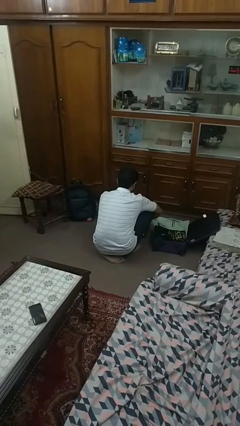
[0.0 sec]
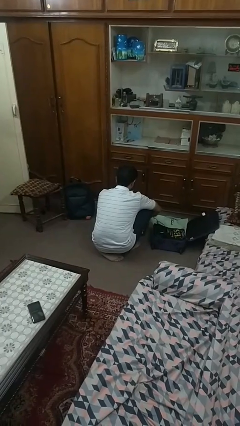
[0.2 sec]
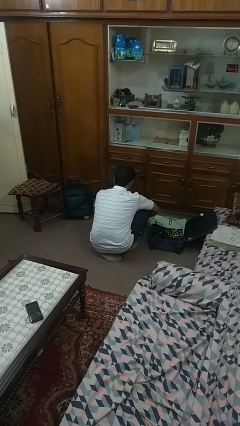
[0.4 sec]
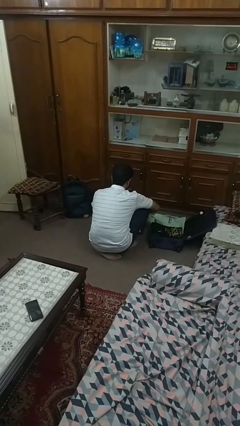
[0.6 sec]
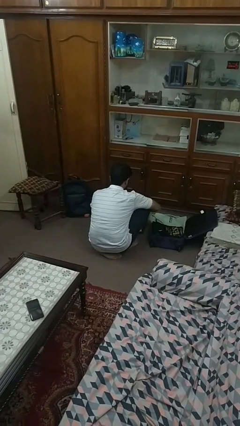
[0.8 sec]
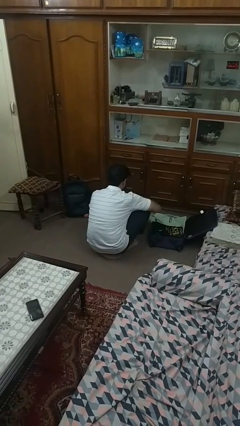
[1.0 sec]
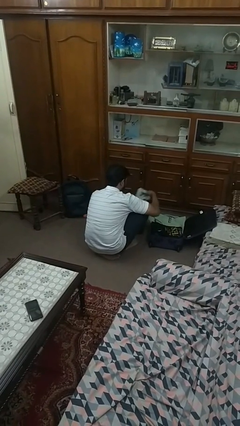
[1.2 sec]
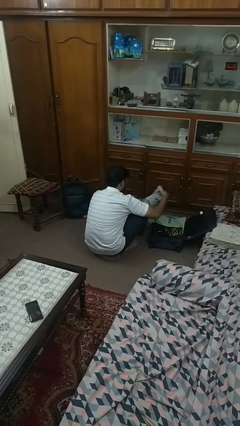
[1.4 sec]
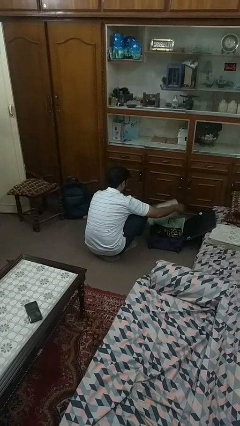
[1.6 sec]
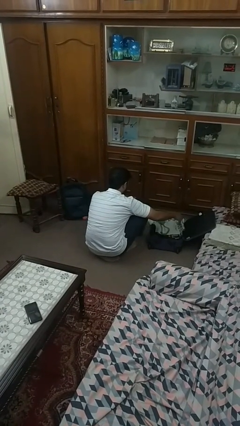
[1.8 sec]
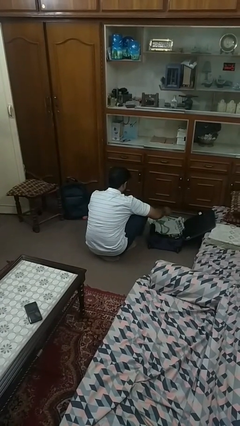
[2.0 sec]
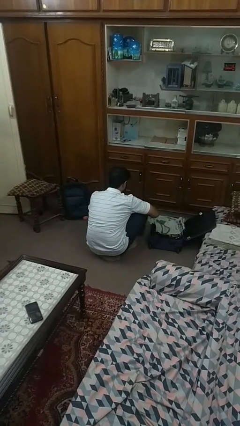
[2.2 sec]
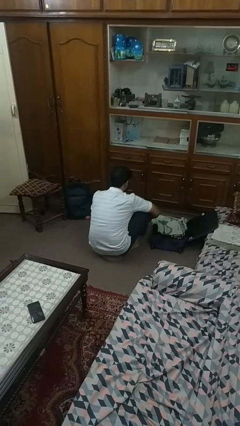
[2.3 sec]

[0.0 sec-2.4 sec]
person loads clothes into suitcase

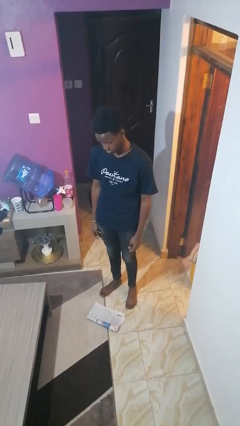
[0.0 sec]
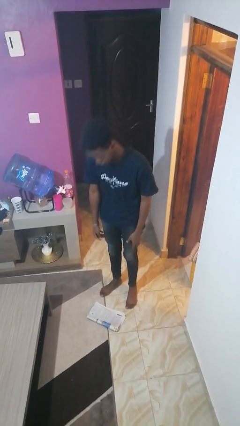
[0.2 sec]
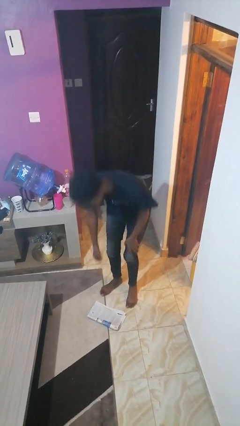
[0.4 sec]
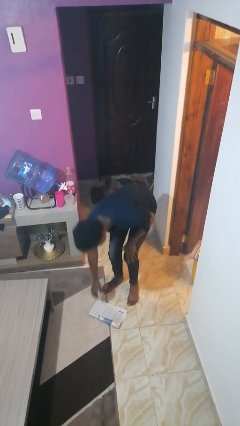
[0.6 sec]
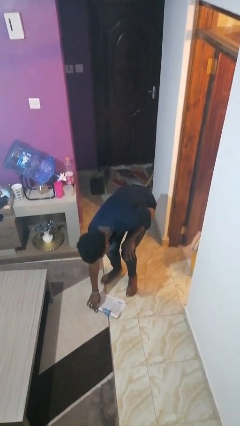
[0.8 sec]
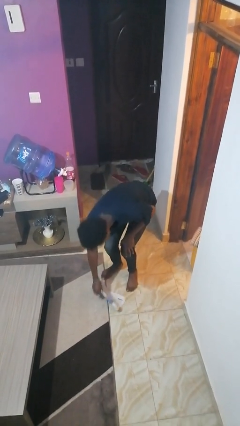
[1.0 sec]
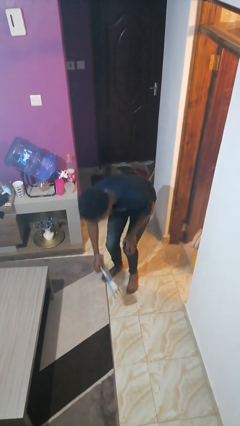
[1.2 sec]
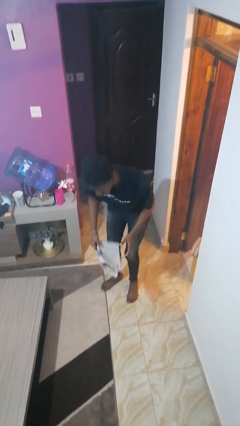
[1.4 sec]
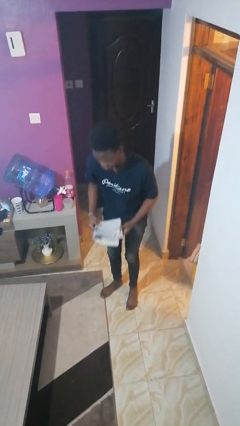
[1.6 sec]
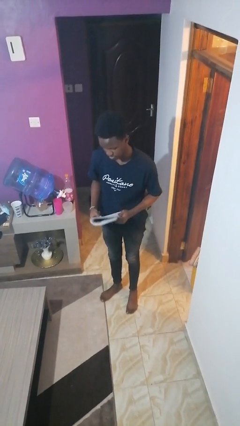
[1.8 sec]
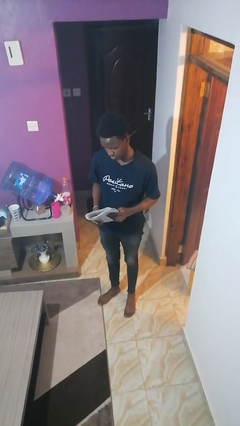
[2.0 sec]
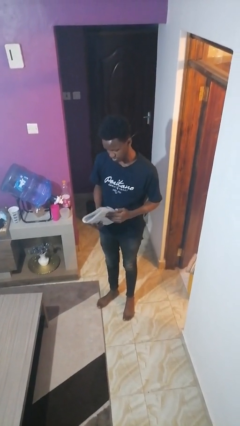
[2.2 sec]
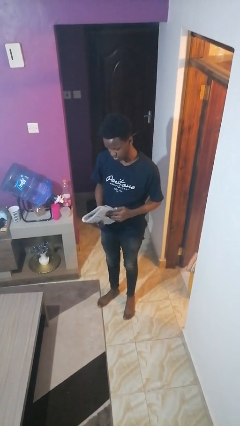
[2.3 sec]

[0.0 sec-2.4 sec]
person picks up object from floor

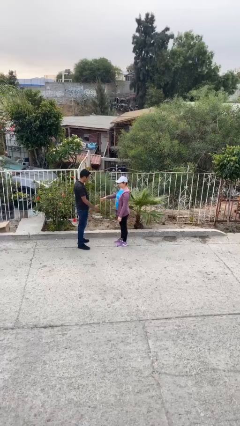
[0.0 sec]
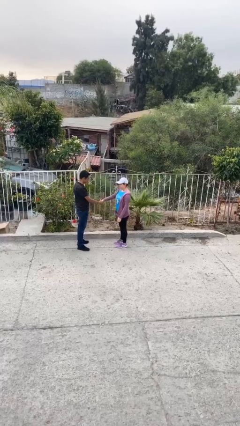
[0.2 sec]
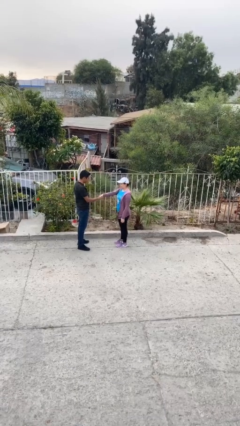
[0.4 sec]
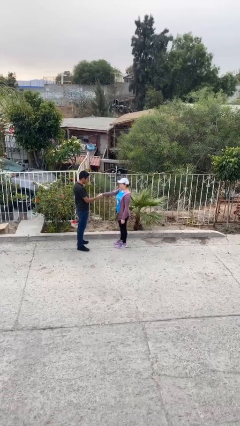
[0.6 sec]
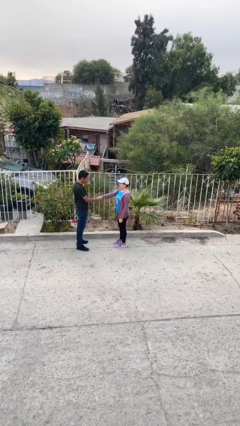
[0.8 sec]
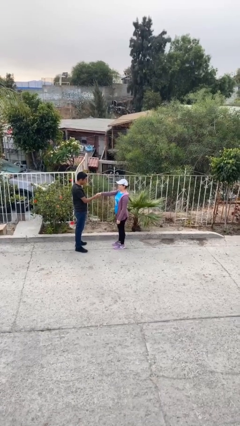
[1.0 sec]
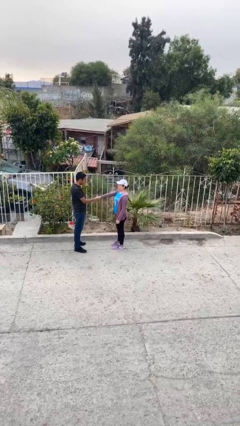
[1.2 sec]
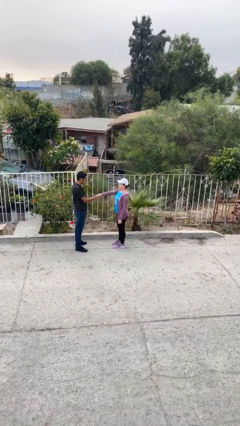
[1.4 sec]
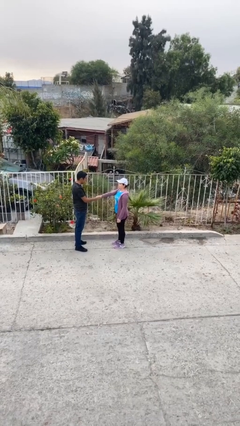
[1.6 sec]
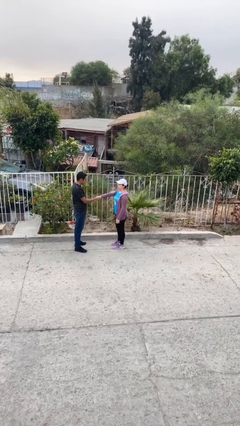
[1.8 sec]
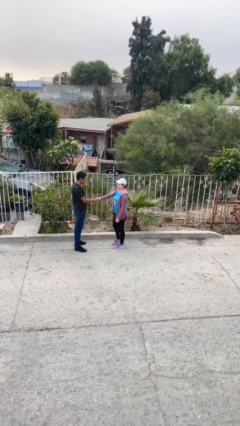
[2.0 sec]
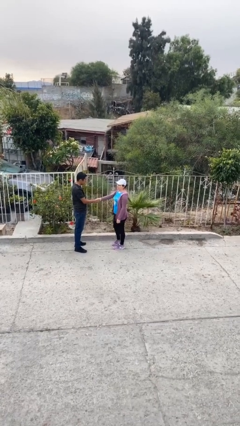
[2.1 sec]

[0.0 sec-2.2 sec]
person shakes hand

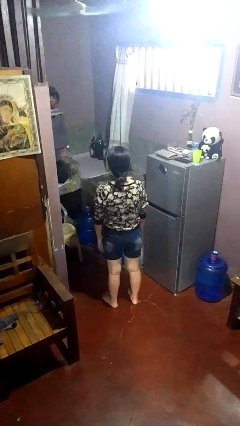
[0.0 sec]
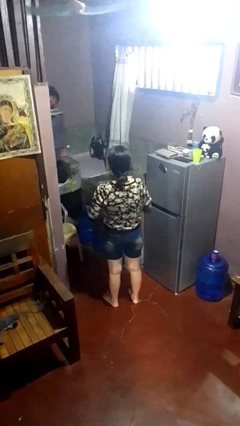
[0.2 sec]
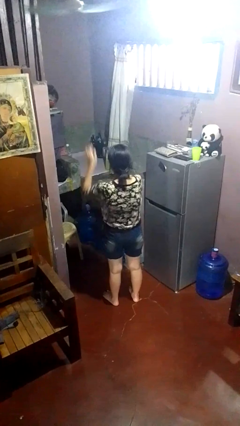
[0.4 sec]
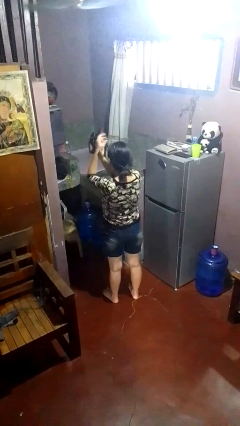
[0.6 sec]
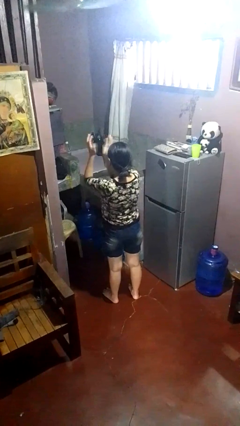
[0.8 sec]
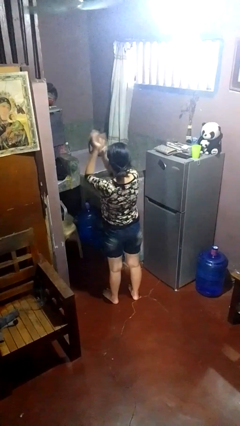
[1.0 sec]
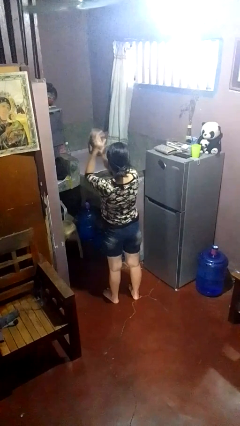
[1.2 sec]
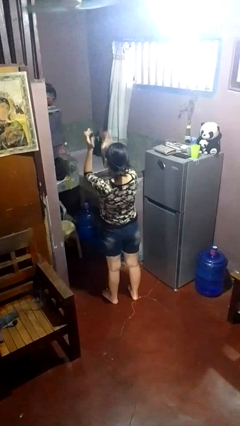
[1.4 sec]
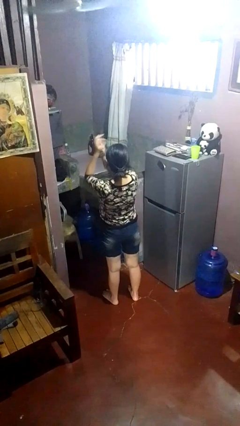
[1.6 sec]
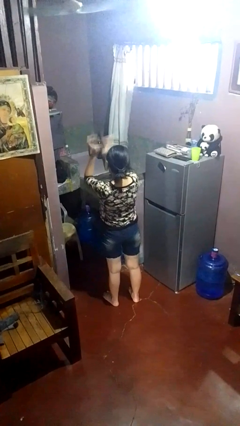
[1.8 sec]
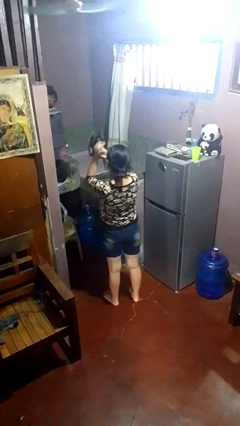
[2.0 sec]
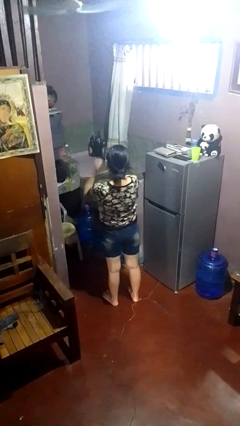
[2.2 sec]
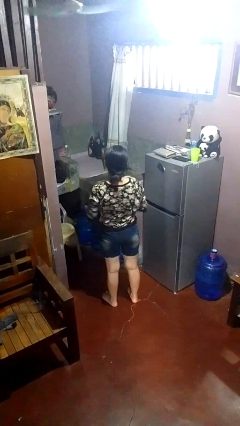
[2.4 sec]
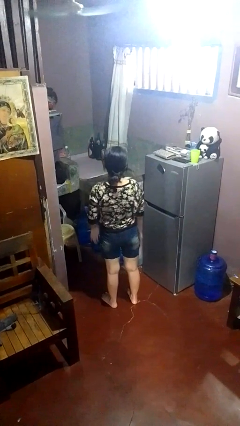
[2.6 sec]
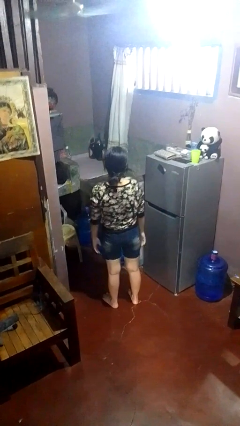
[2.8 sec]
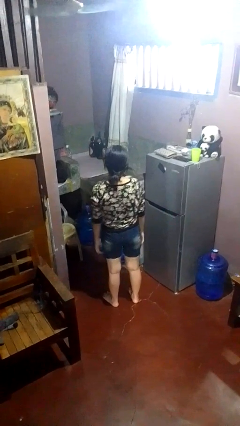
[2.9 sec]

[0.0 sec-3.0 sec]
person claps hands

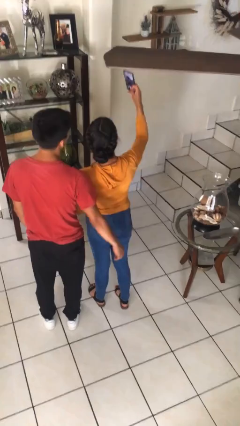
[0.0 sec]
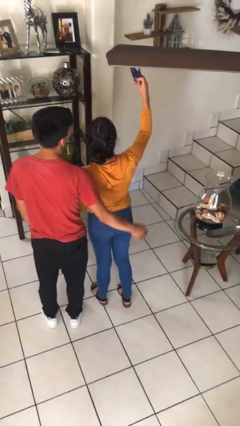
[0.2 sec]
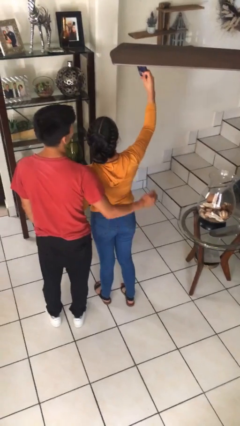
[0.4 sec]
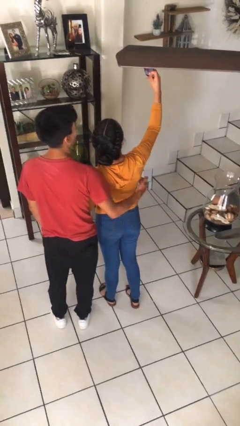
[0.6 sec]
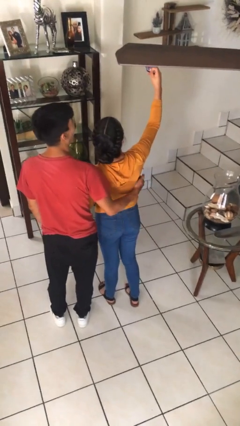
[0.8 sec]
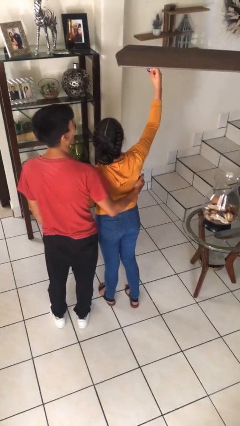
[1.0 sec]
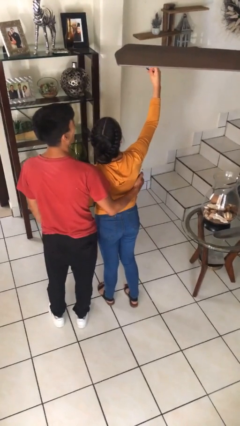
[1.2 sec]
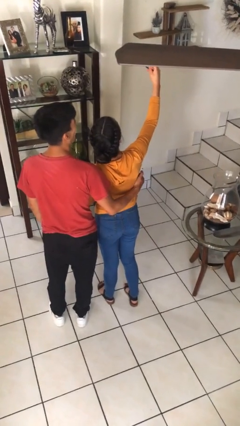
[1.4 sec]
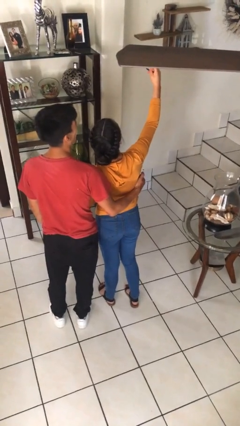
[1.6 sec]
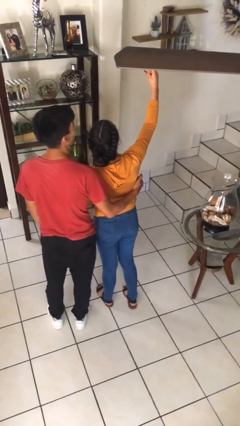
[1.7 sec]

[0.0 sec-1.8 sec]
person takes selfie with person

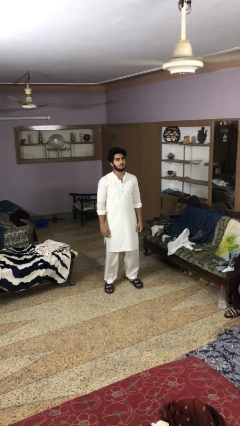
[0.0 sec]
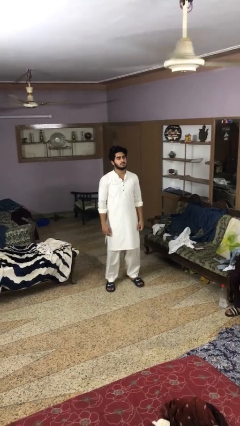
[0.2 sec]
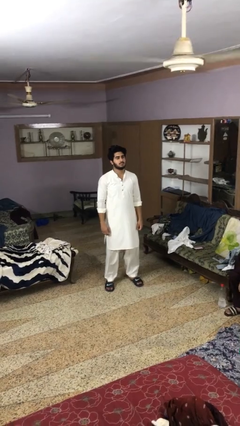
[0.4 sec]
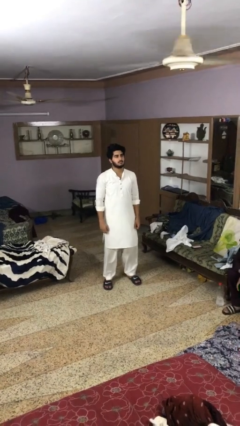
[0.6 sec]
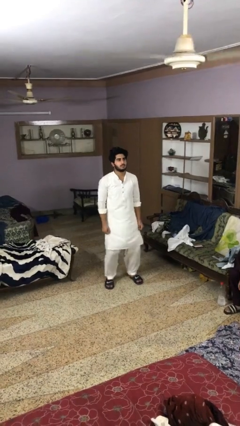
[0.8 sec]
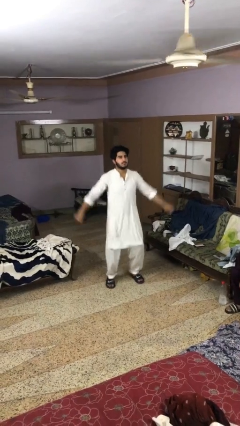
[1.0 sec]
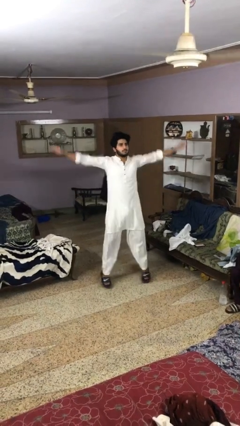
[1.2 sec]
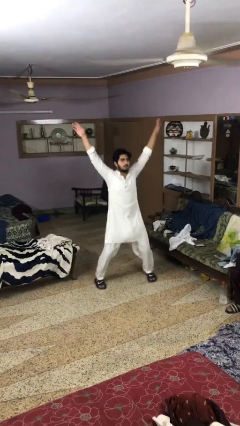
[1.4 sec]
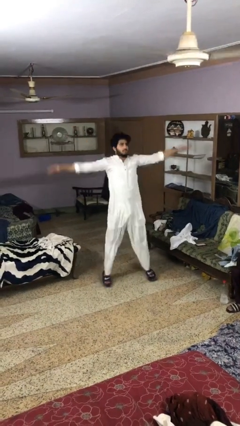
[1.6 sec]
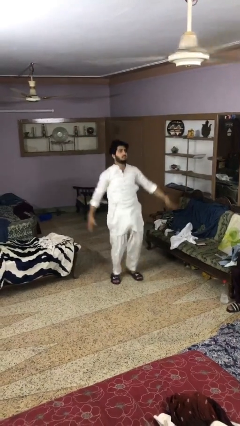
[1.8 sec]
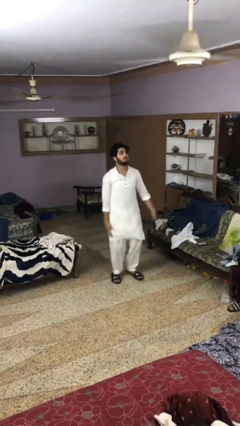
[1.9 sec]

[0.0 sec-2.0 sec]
person exercises with jumping jacks

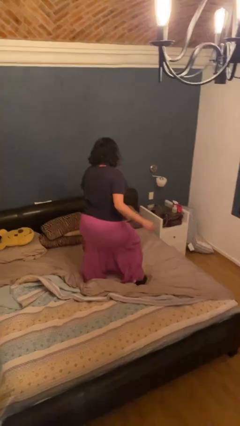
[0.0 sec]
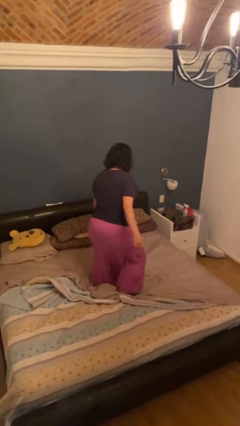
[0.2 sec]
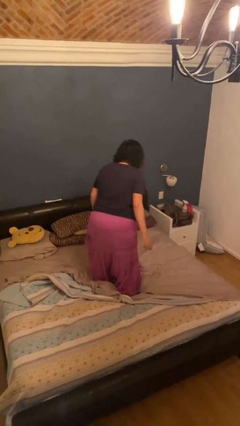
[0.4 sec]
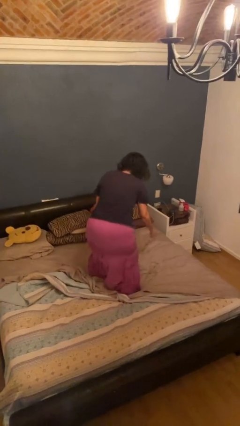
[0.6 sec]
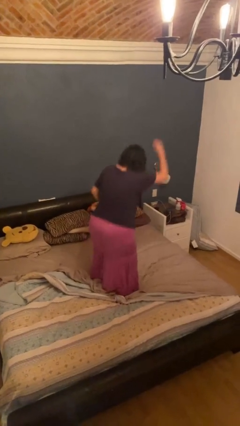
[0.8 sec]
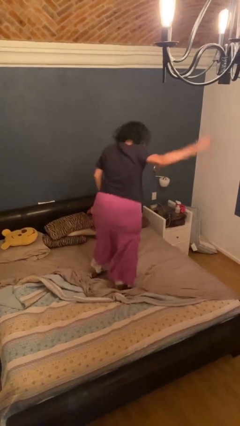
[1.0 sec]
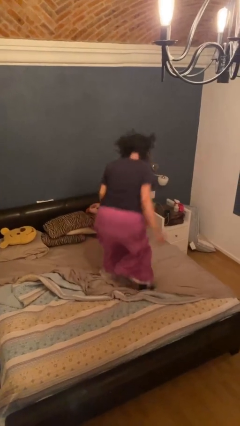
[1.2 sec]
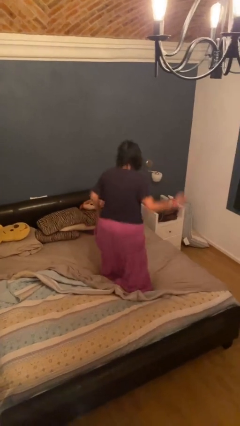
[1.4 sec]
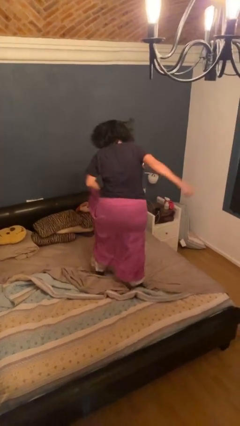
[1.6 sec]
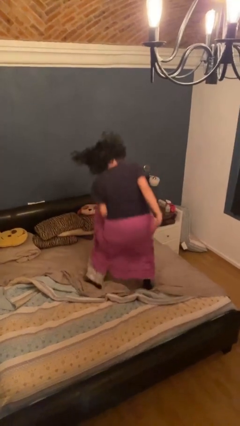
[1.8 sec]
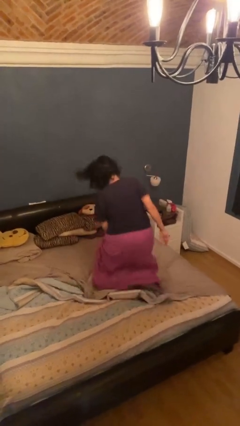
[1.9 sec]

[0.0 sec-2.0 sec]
person jumps on bed

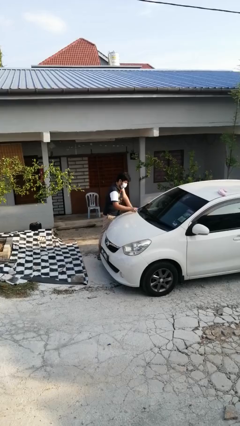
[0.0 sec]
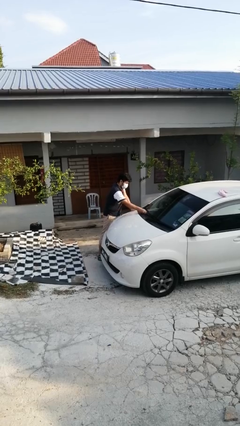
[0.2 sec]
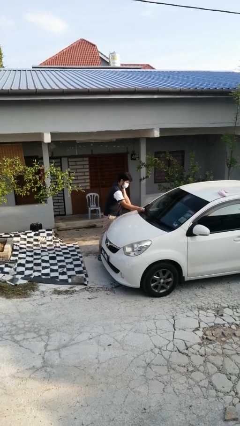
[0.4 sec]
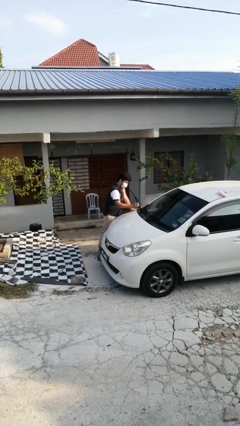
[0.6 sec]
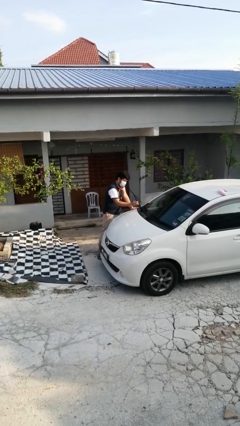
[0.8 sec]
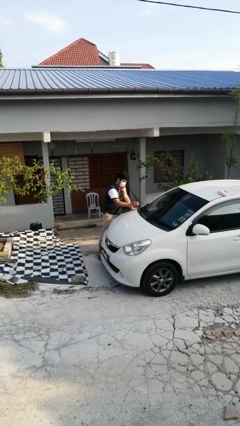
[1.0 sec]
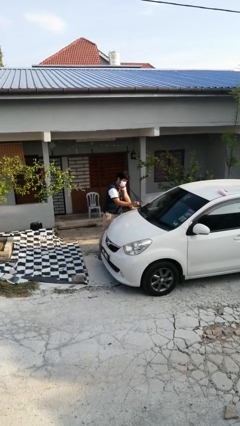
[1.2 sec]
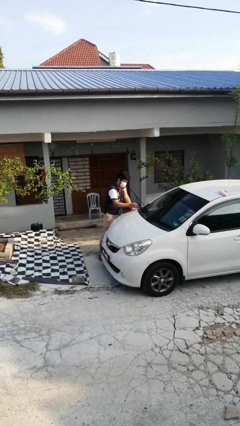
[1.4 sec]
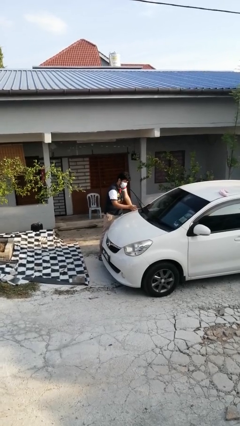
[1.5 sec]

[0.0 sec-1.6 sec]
person flips up car wipers
